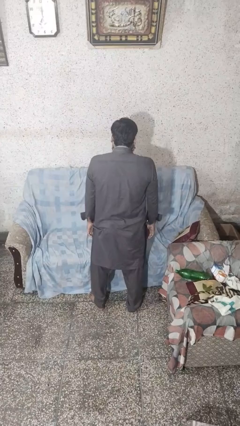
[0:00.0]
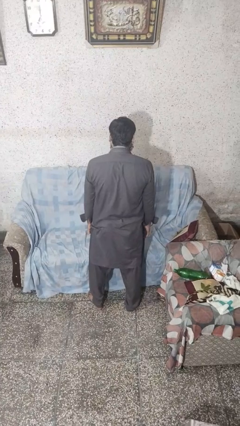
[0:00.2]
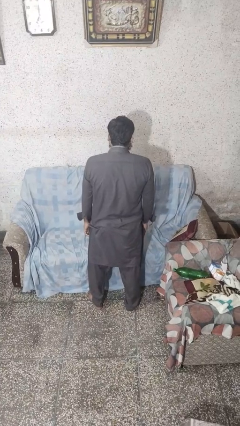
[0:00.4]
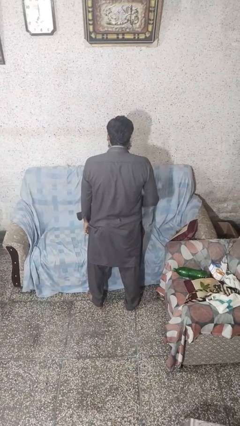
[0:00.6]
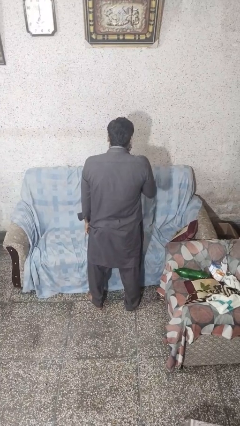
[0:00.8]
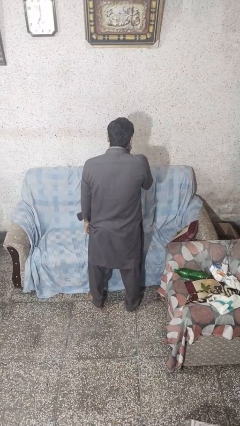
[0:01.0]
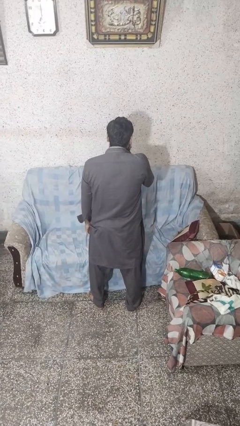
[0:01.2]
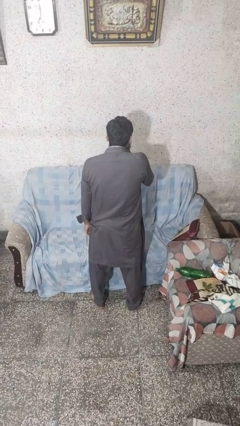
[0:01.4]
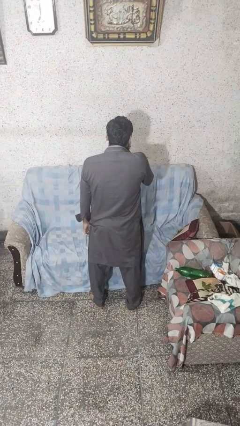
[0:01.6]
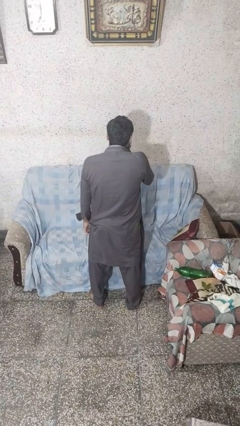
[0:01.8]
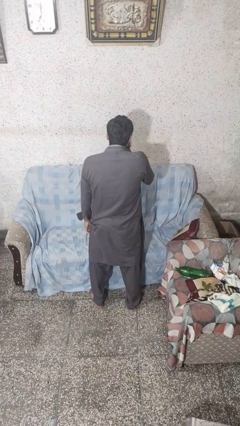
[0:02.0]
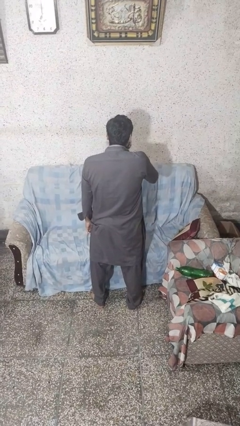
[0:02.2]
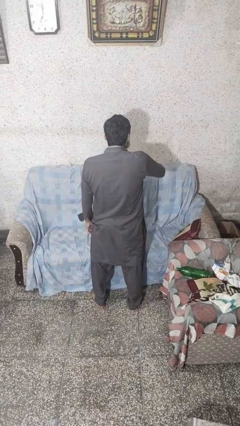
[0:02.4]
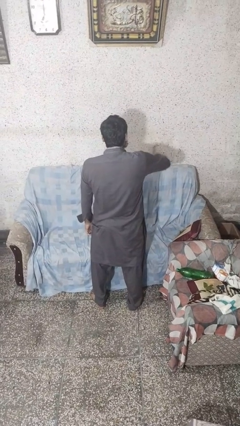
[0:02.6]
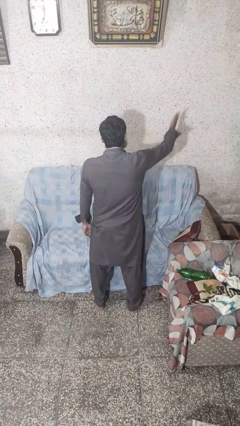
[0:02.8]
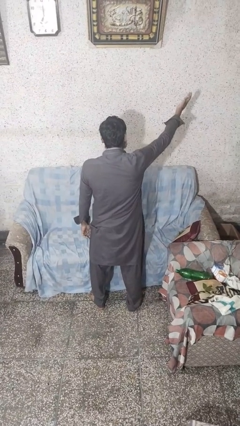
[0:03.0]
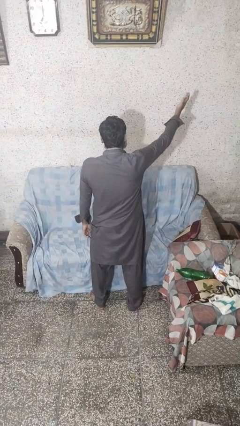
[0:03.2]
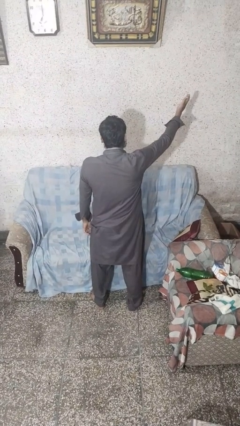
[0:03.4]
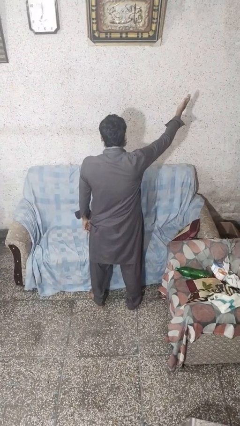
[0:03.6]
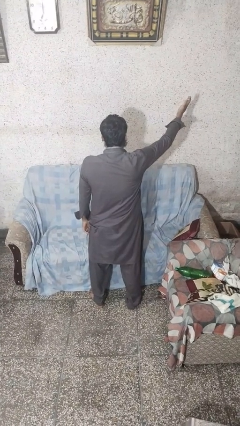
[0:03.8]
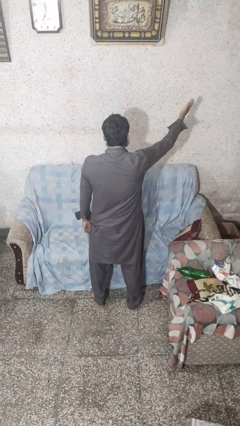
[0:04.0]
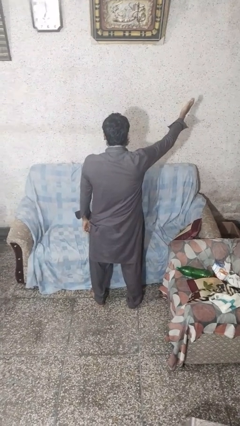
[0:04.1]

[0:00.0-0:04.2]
person gestures blow kiss

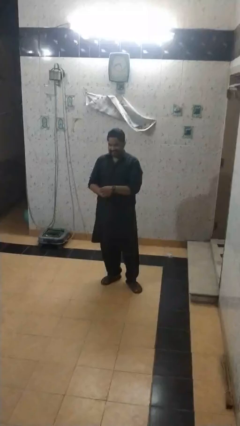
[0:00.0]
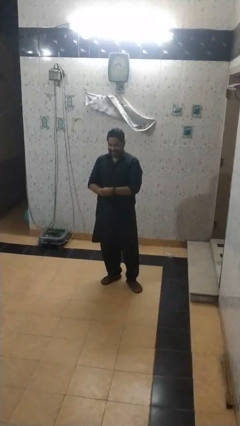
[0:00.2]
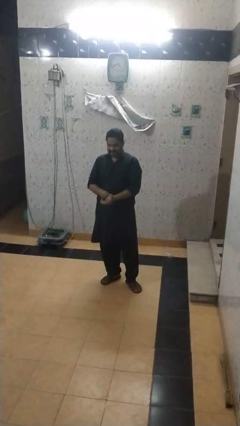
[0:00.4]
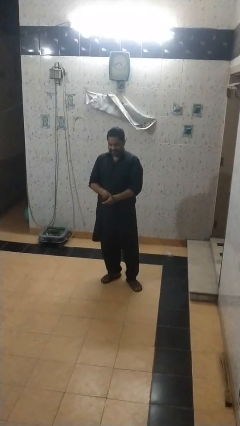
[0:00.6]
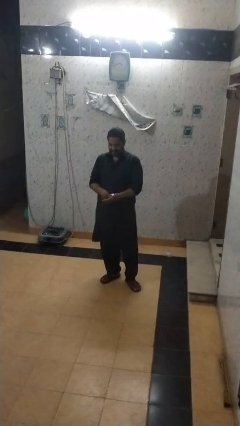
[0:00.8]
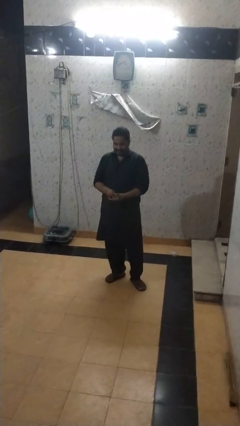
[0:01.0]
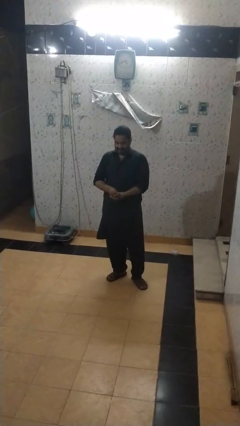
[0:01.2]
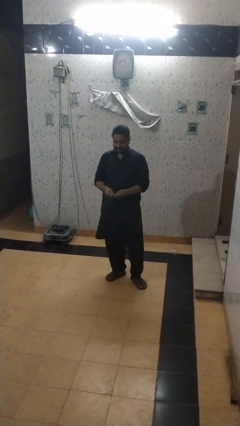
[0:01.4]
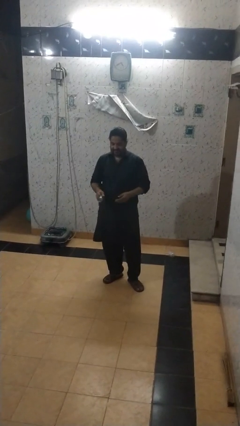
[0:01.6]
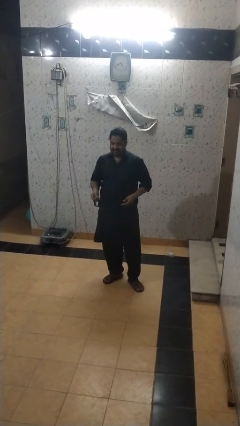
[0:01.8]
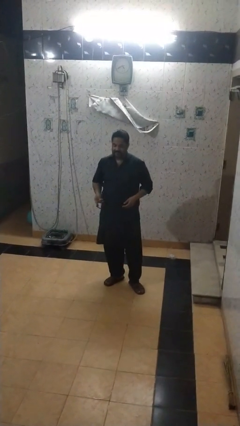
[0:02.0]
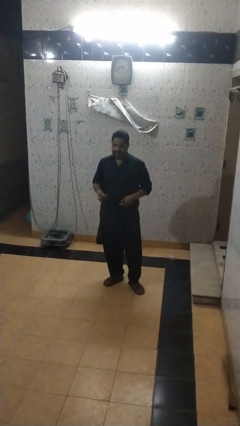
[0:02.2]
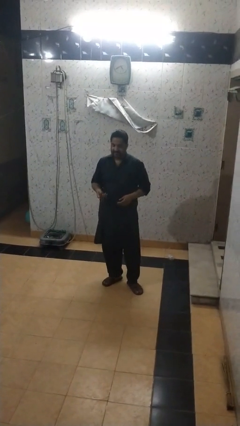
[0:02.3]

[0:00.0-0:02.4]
person takes off wristwatch

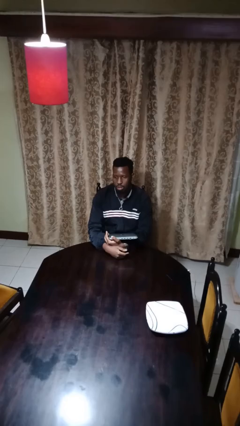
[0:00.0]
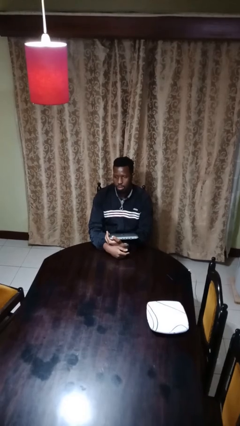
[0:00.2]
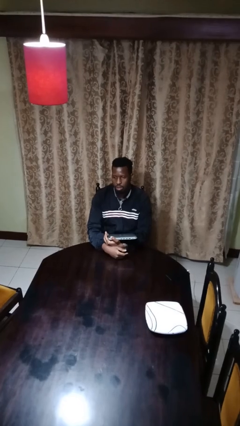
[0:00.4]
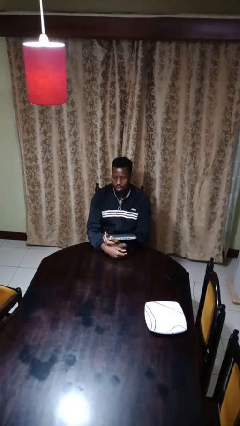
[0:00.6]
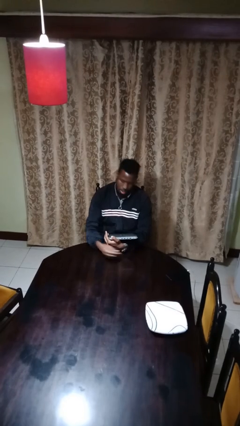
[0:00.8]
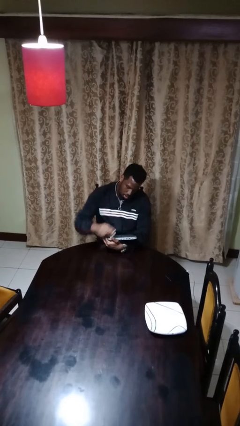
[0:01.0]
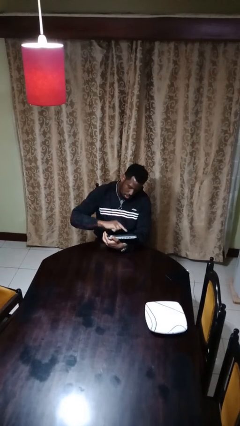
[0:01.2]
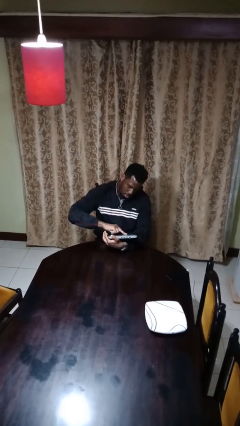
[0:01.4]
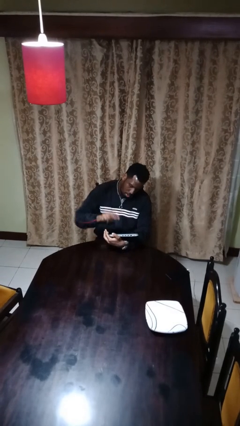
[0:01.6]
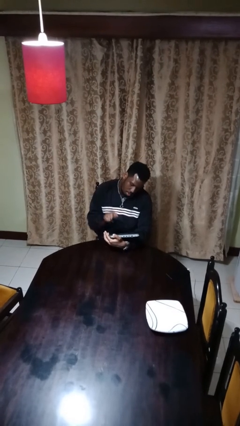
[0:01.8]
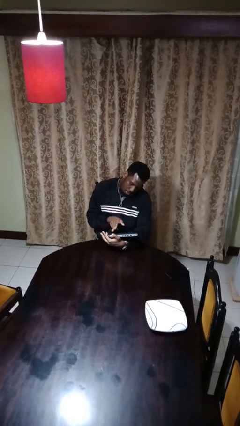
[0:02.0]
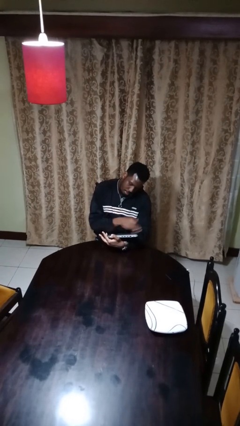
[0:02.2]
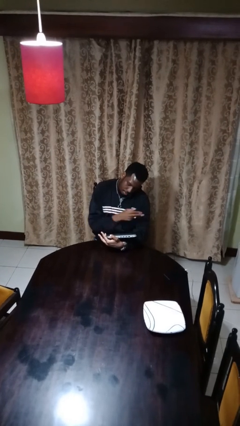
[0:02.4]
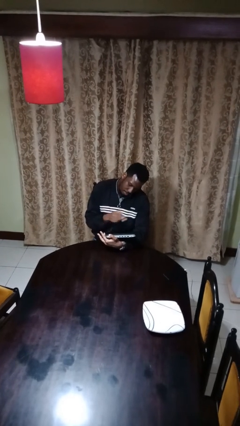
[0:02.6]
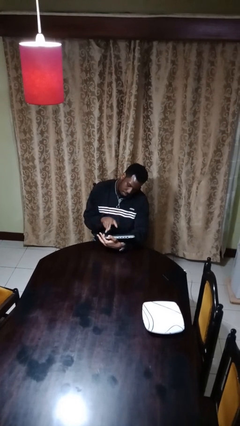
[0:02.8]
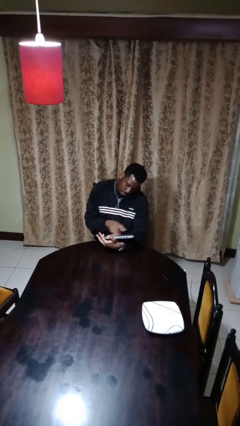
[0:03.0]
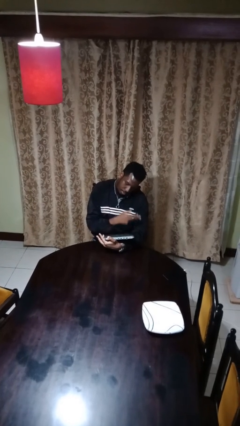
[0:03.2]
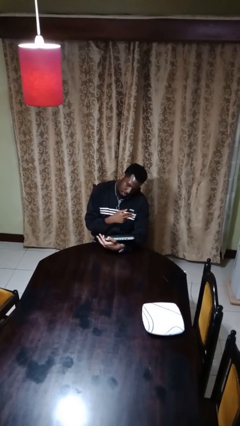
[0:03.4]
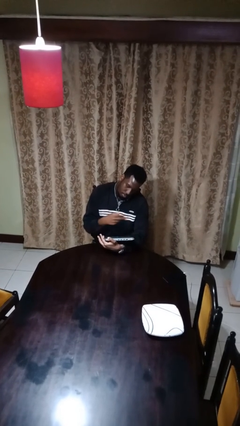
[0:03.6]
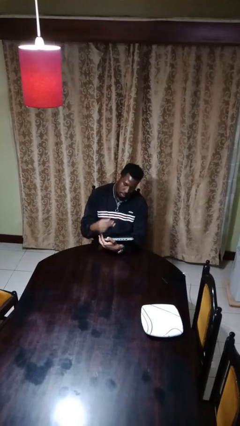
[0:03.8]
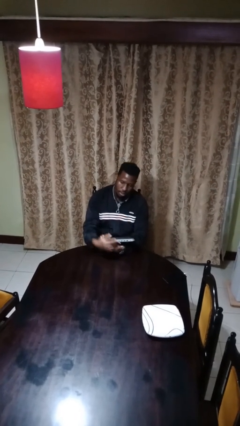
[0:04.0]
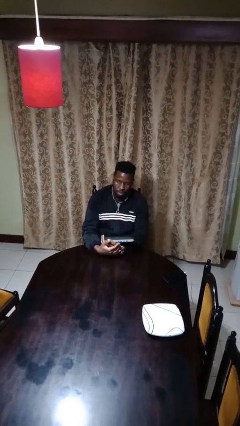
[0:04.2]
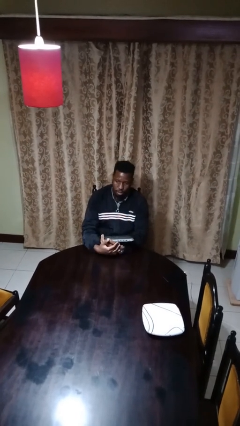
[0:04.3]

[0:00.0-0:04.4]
person interacts with tablet

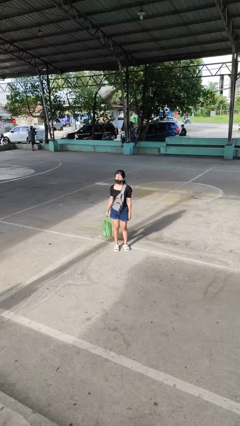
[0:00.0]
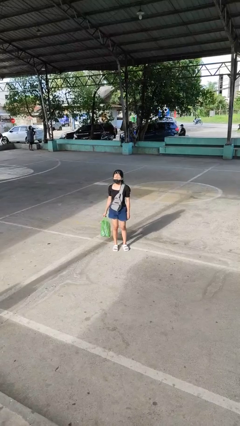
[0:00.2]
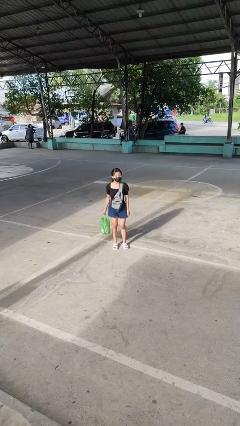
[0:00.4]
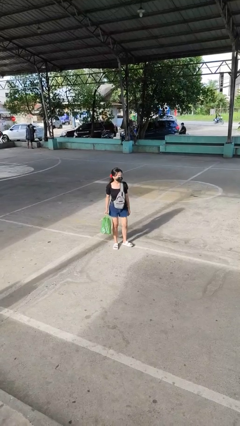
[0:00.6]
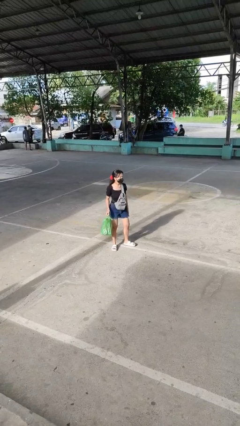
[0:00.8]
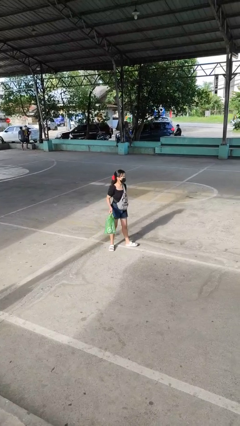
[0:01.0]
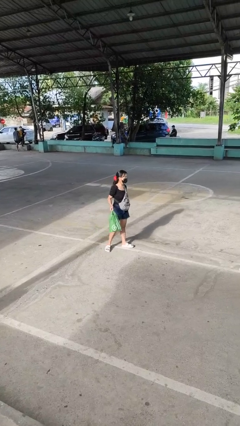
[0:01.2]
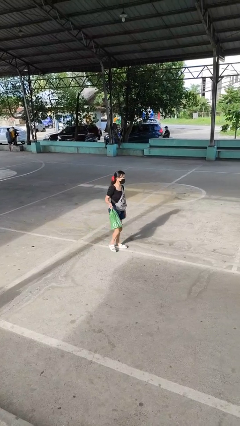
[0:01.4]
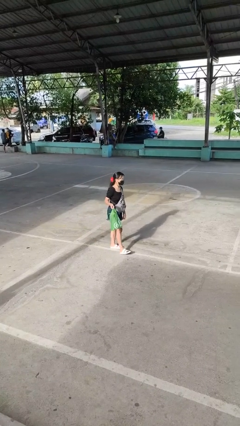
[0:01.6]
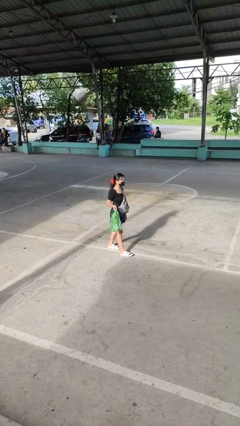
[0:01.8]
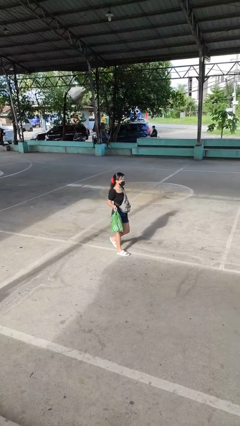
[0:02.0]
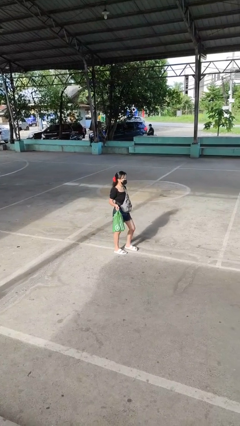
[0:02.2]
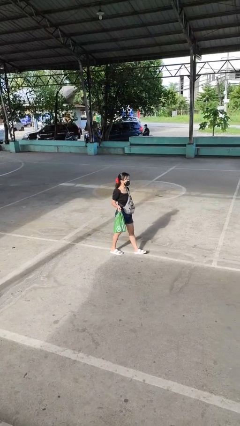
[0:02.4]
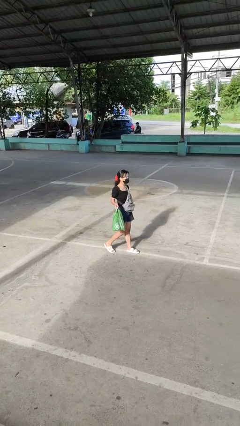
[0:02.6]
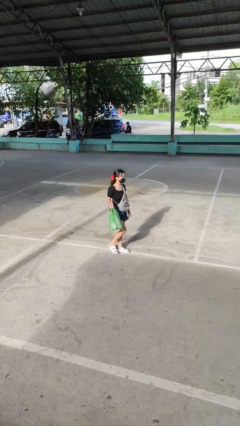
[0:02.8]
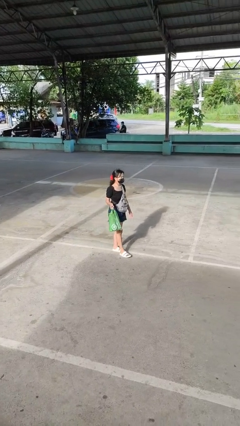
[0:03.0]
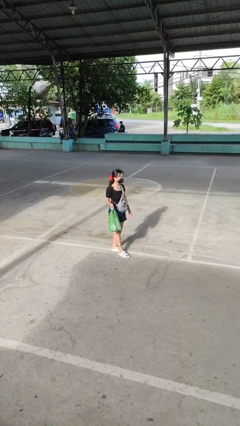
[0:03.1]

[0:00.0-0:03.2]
person carries groceries

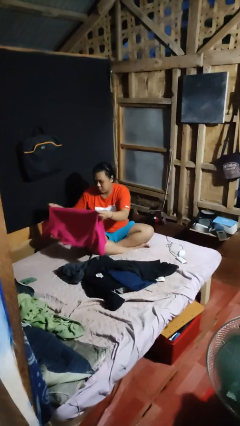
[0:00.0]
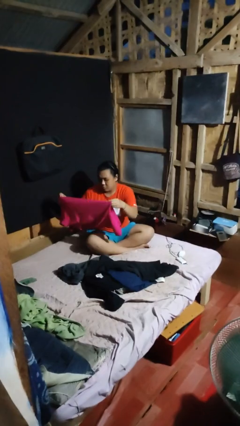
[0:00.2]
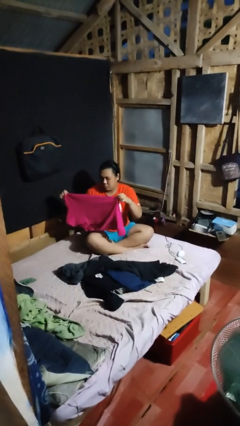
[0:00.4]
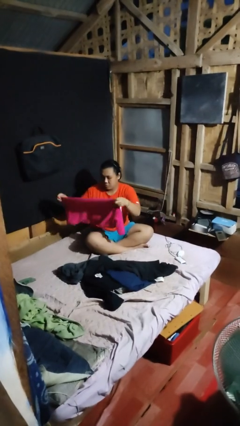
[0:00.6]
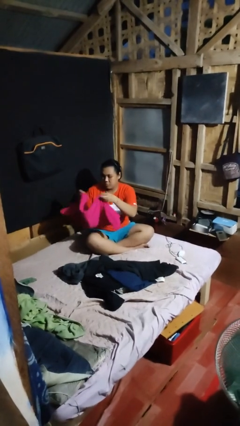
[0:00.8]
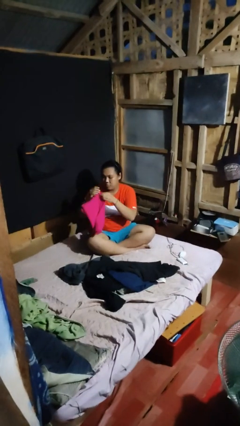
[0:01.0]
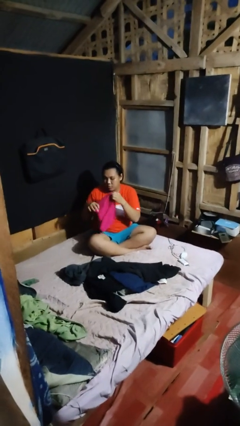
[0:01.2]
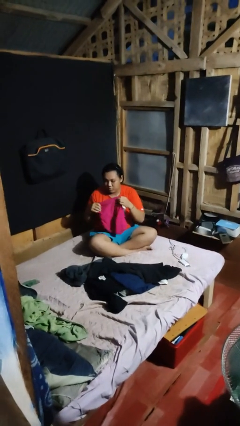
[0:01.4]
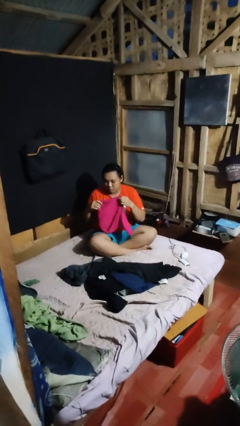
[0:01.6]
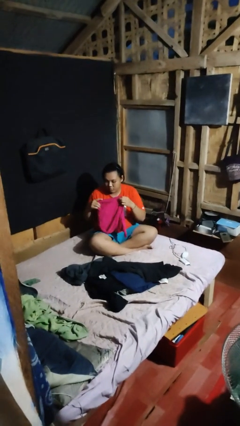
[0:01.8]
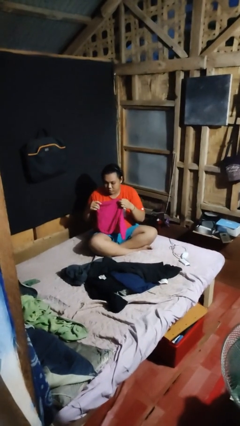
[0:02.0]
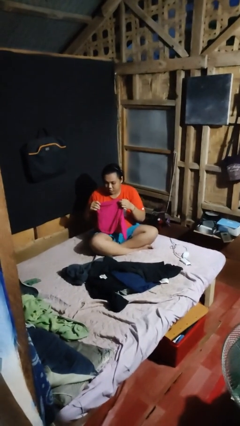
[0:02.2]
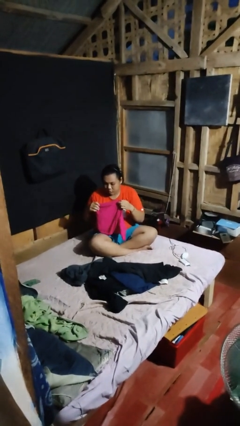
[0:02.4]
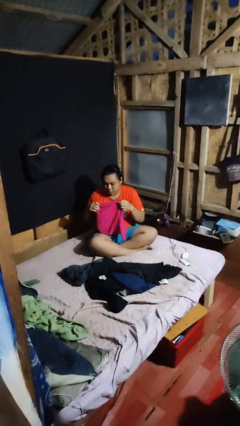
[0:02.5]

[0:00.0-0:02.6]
person folds shirt

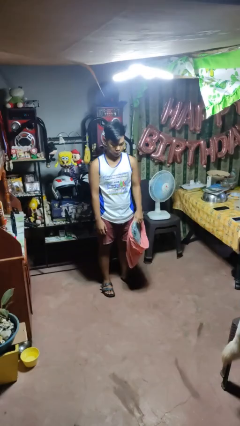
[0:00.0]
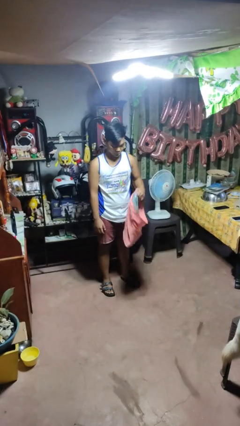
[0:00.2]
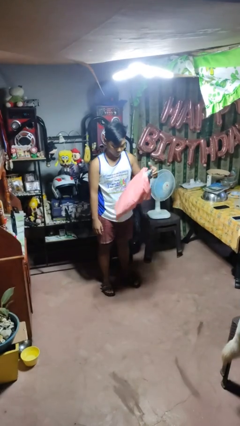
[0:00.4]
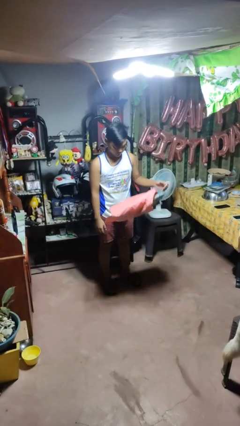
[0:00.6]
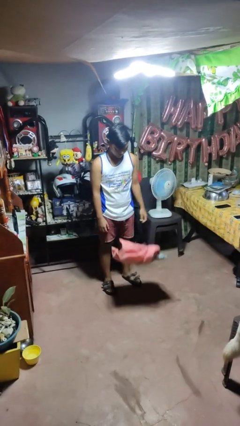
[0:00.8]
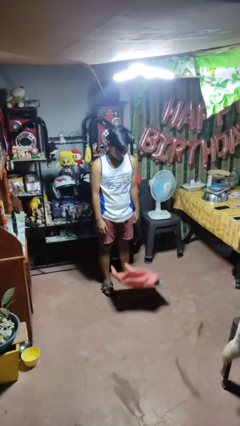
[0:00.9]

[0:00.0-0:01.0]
person drops object
